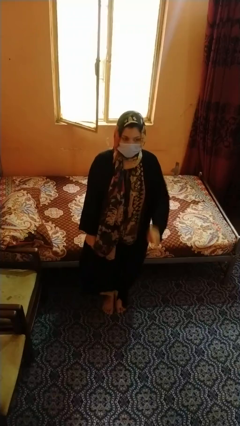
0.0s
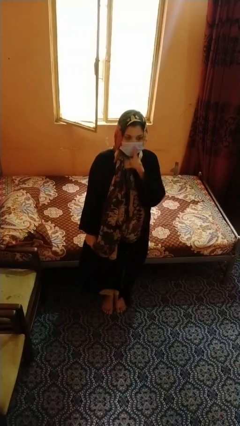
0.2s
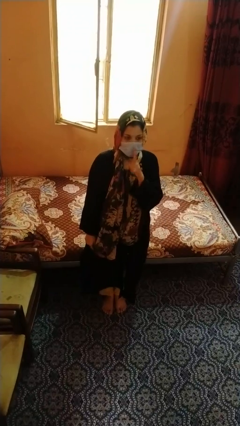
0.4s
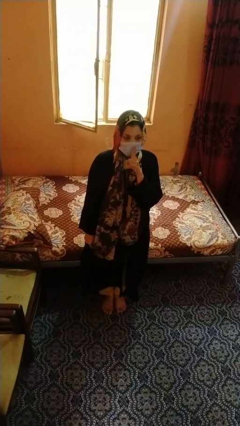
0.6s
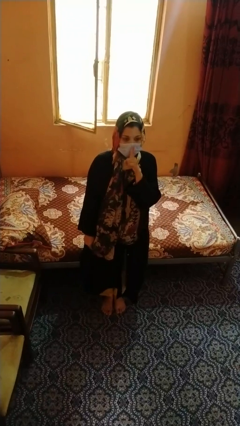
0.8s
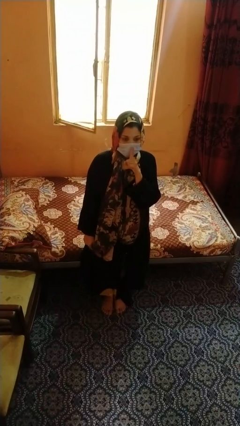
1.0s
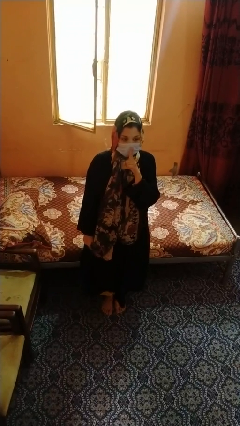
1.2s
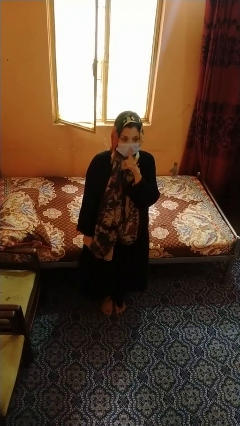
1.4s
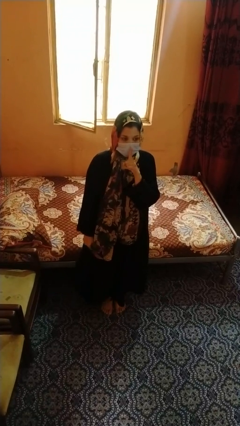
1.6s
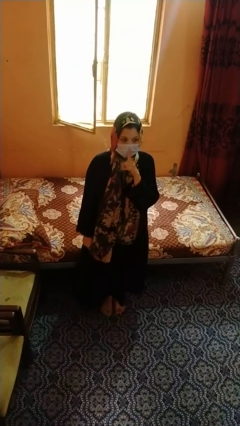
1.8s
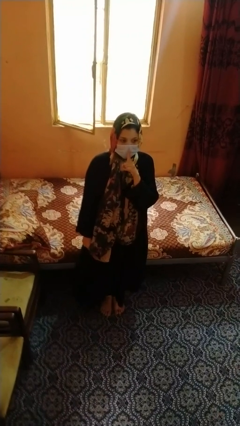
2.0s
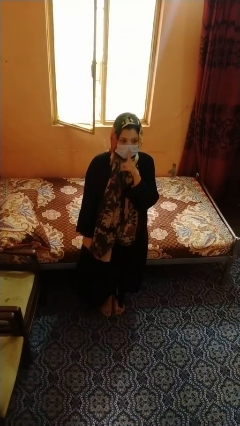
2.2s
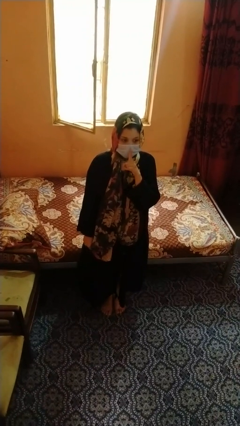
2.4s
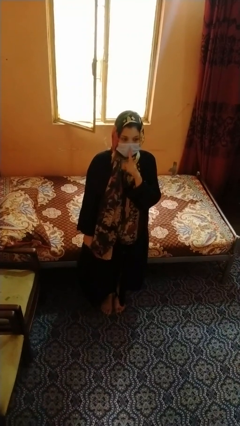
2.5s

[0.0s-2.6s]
person gestures be quiet

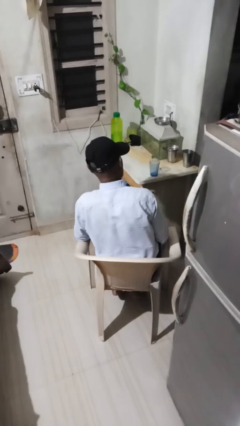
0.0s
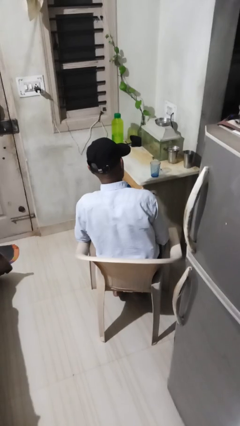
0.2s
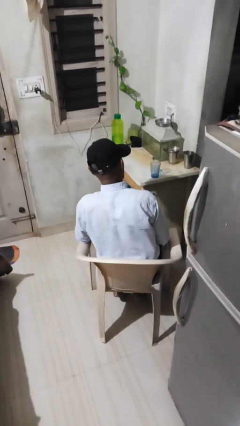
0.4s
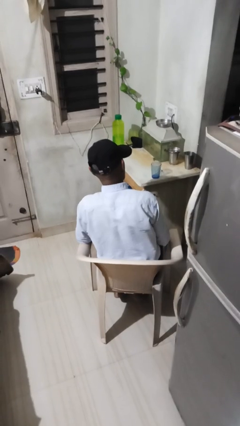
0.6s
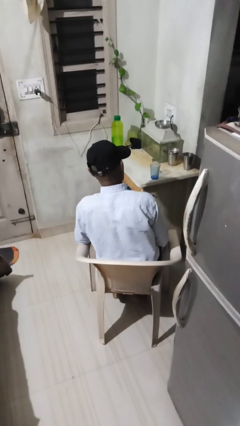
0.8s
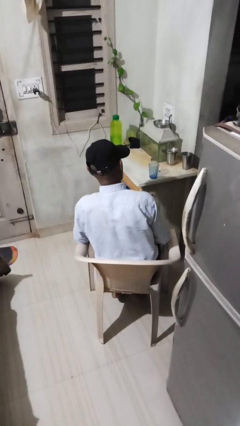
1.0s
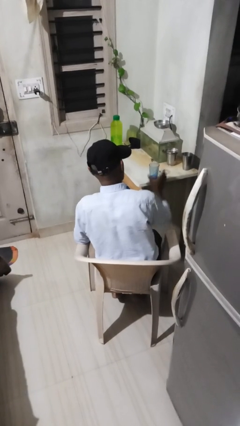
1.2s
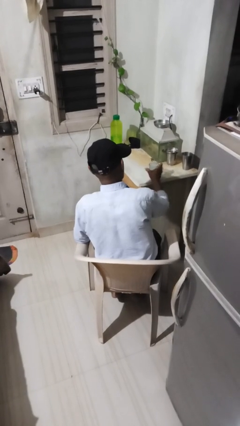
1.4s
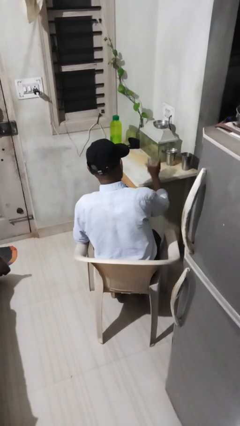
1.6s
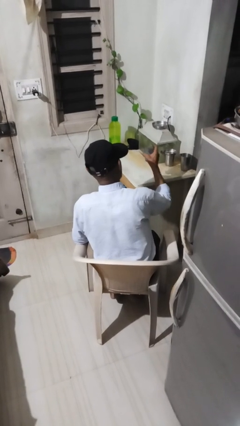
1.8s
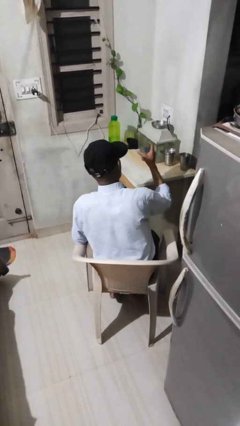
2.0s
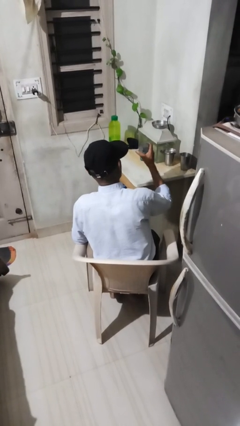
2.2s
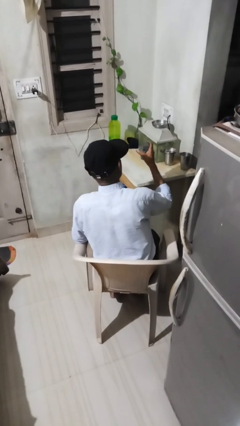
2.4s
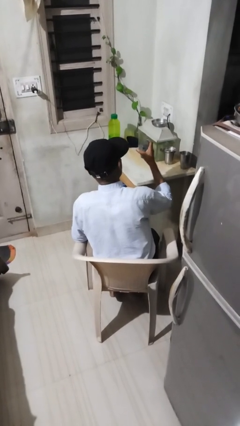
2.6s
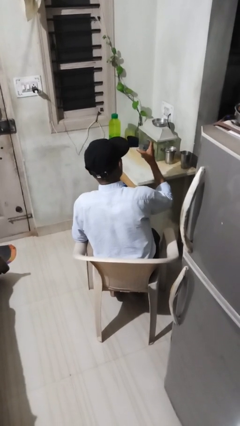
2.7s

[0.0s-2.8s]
person picks up object from table

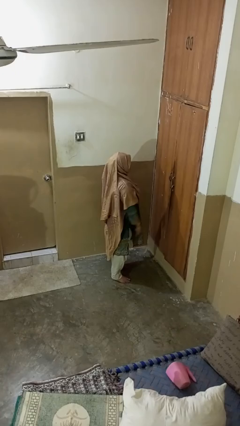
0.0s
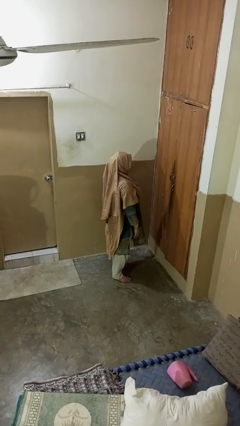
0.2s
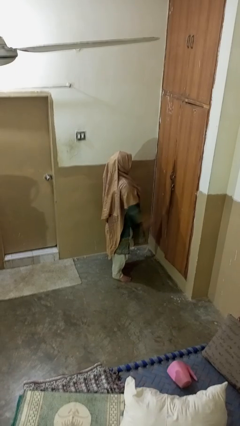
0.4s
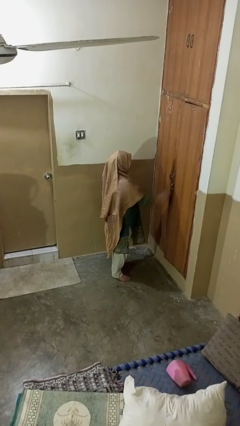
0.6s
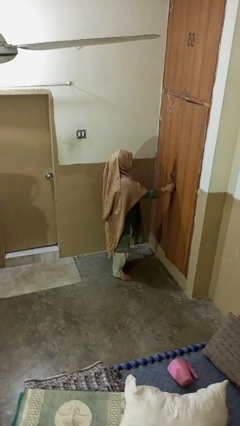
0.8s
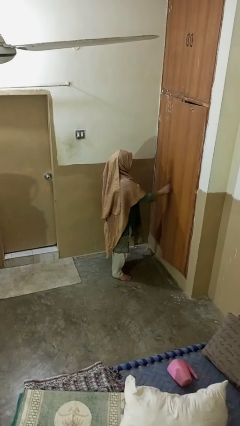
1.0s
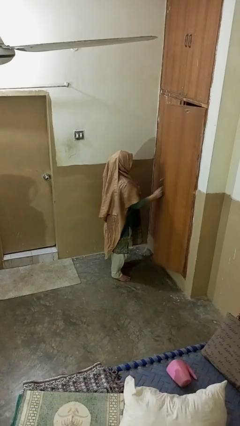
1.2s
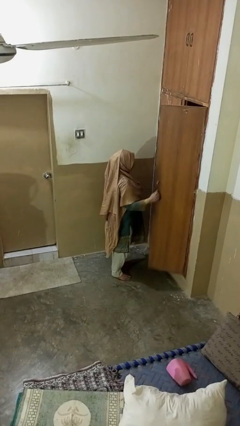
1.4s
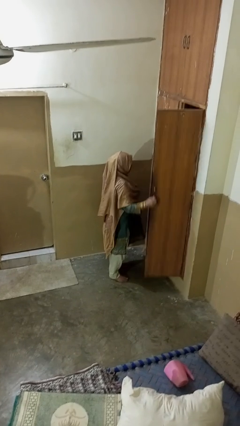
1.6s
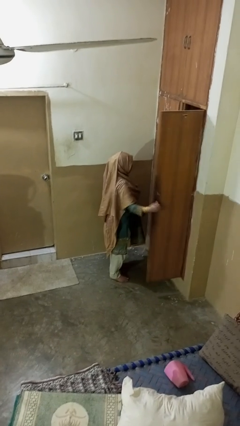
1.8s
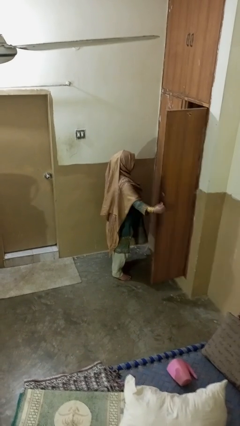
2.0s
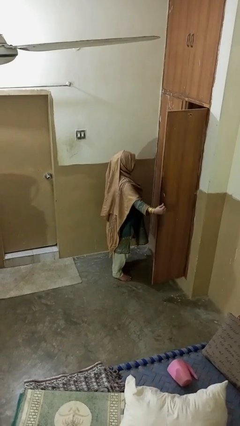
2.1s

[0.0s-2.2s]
person opens closet door

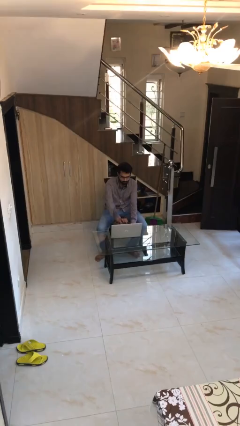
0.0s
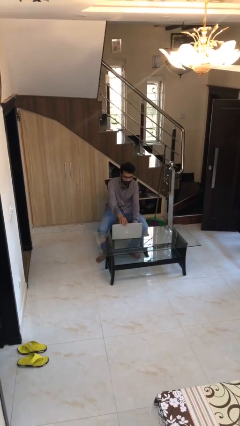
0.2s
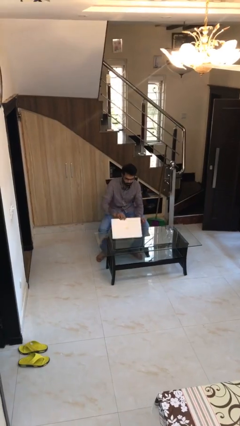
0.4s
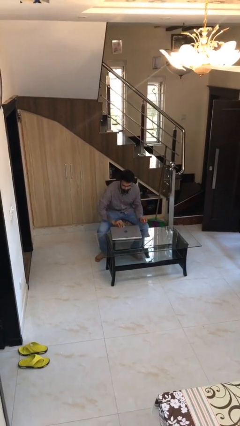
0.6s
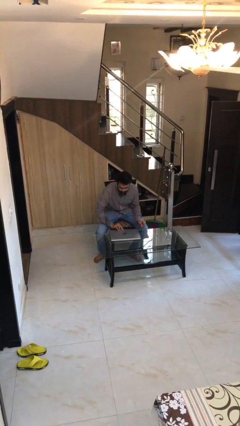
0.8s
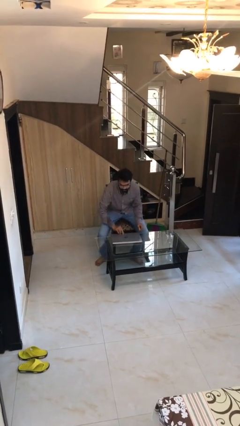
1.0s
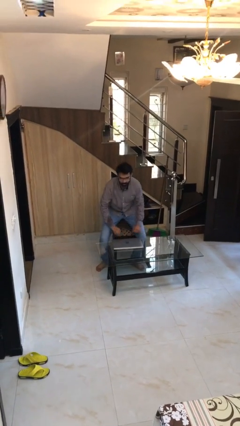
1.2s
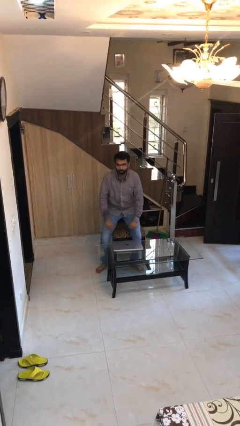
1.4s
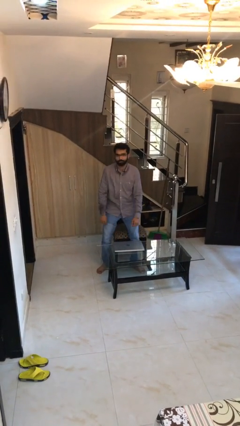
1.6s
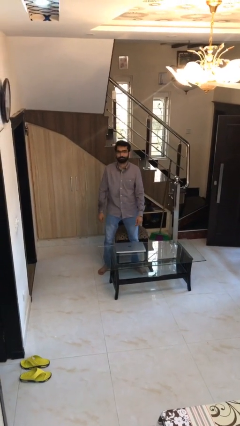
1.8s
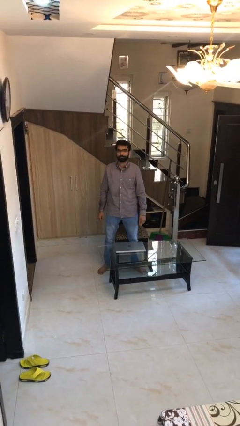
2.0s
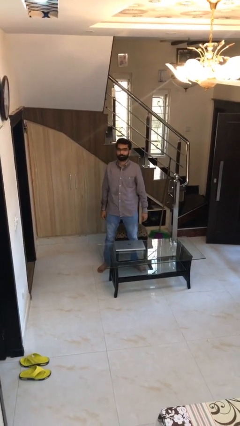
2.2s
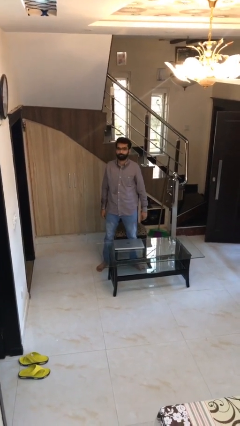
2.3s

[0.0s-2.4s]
person stands up

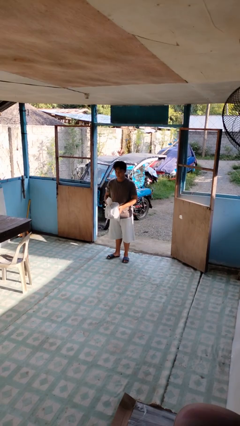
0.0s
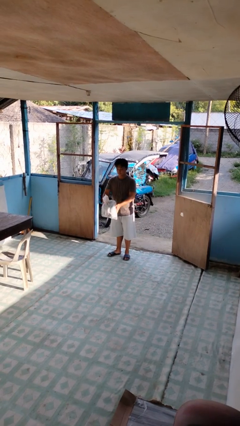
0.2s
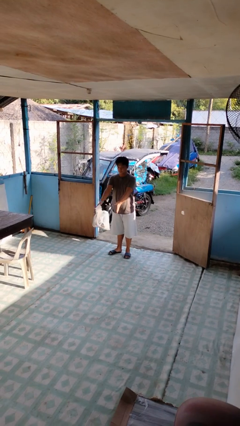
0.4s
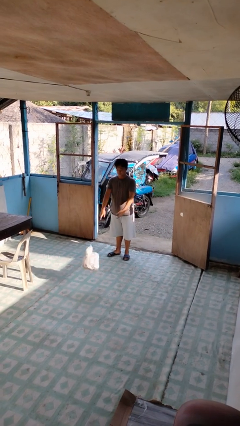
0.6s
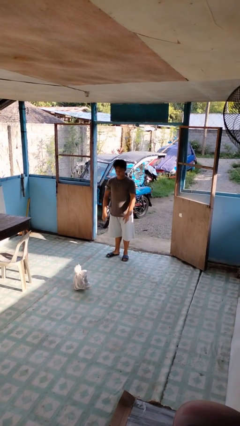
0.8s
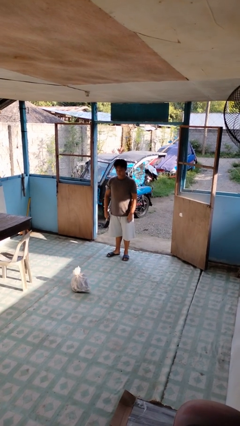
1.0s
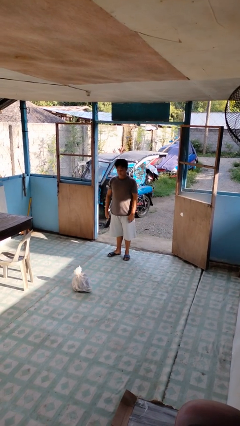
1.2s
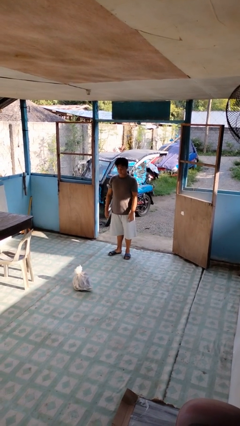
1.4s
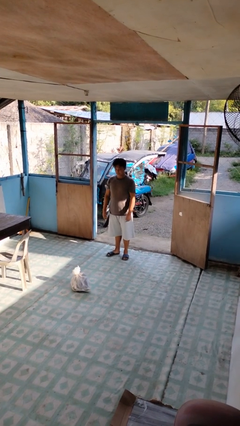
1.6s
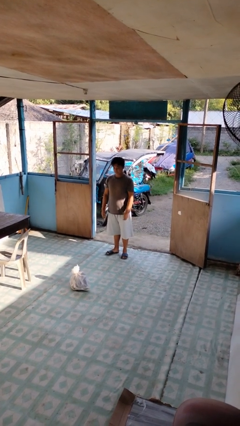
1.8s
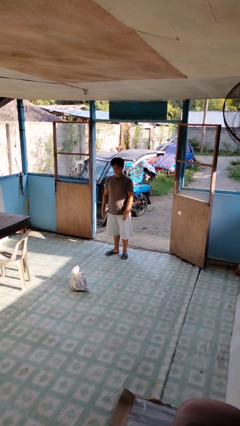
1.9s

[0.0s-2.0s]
person throws object to ground

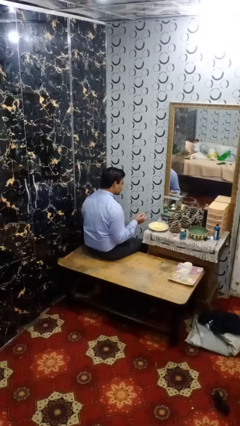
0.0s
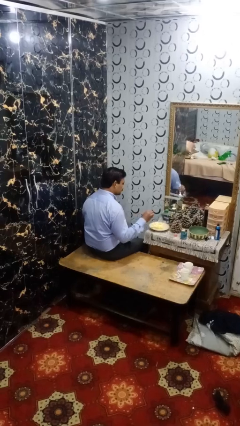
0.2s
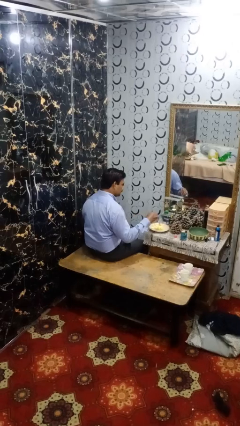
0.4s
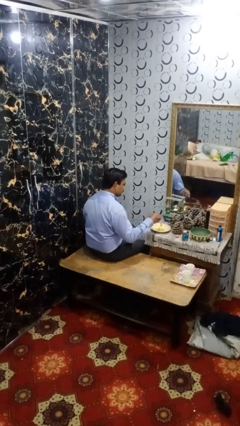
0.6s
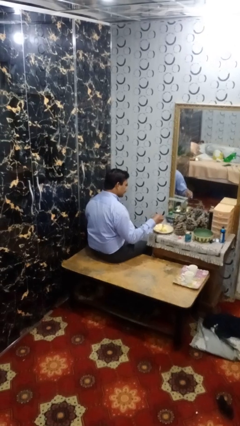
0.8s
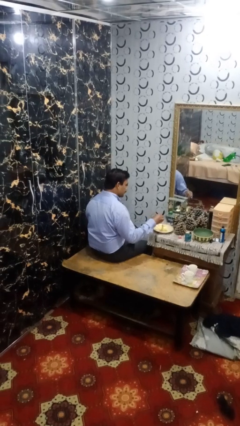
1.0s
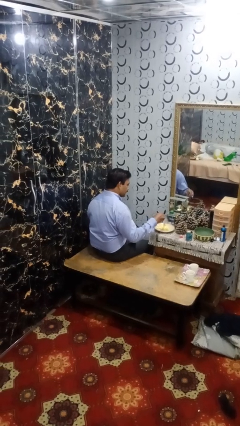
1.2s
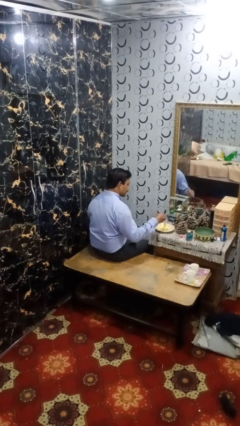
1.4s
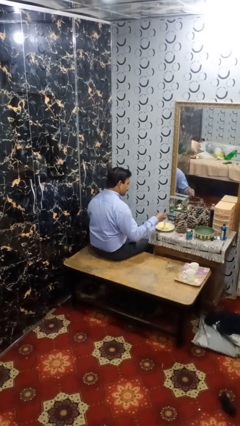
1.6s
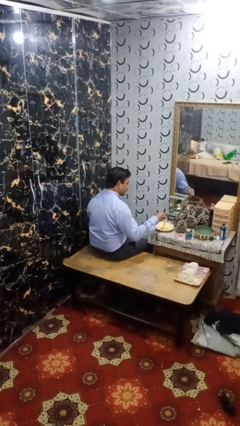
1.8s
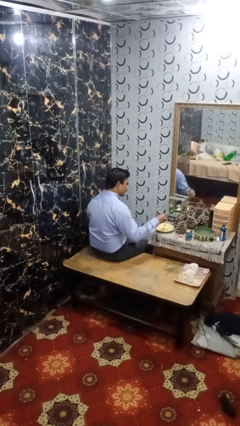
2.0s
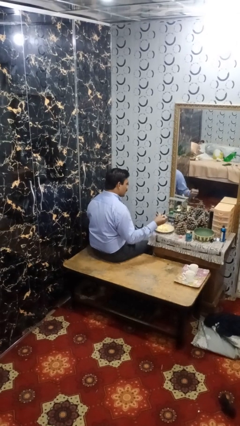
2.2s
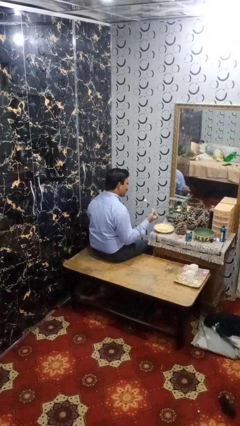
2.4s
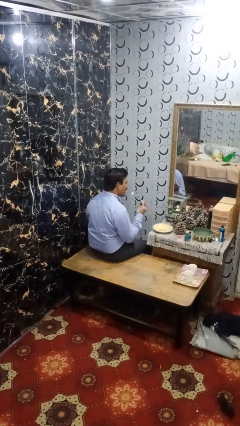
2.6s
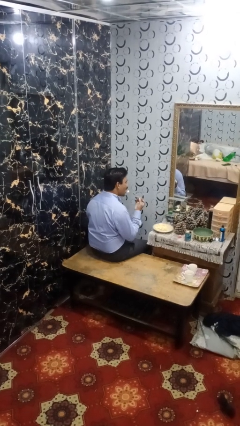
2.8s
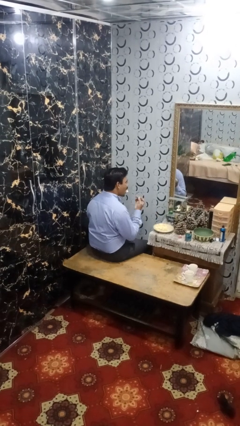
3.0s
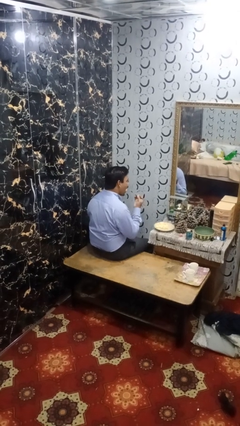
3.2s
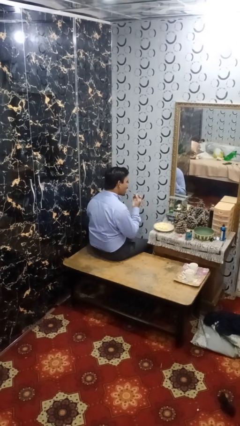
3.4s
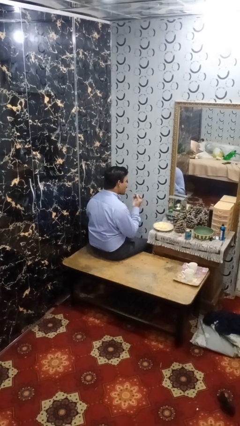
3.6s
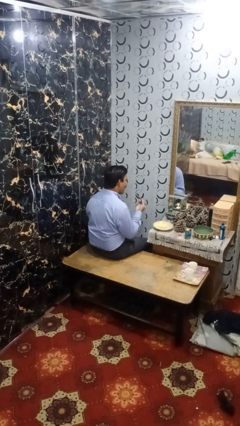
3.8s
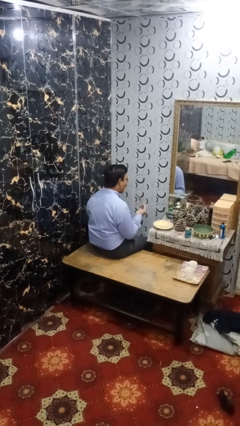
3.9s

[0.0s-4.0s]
person eats with utensil

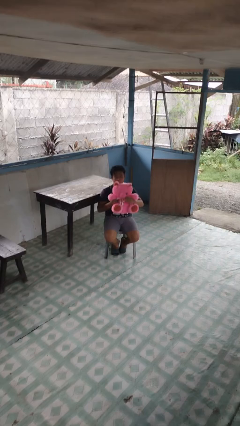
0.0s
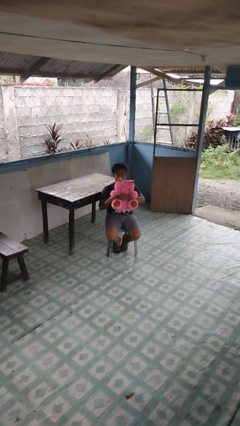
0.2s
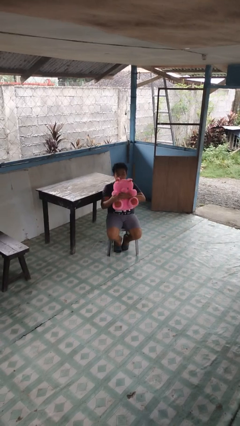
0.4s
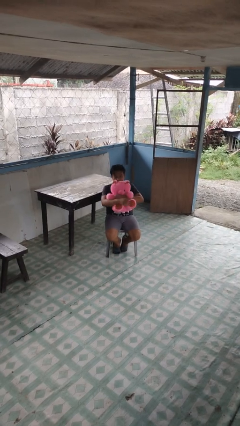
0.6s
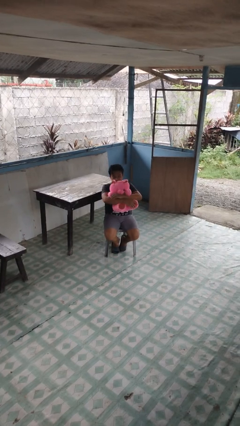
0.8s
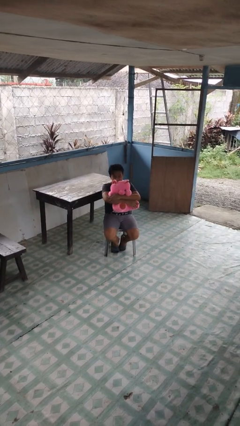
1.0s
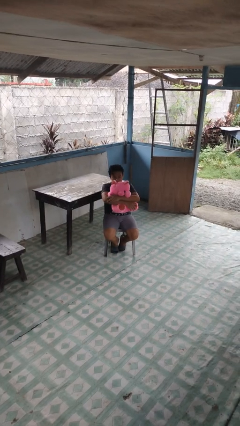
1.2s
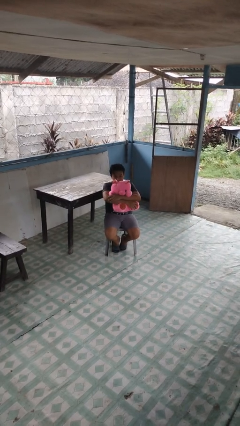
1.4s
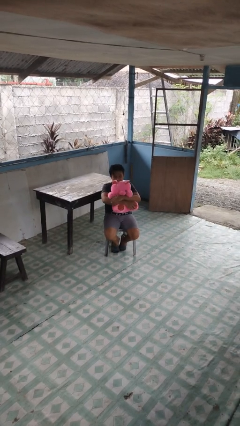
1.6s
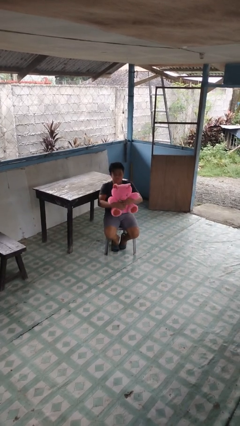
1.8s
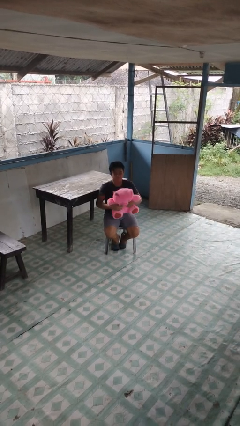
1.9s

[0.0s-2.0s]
person hugs stuffed animal
